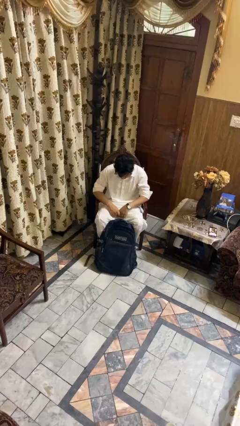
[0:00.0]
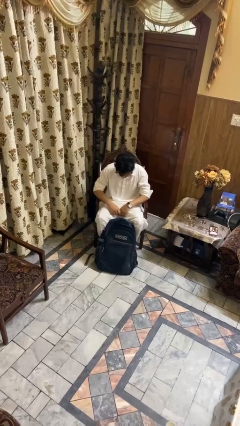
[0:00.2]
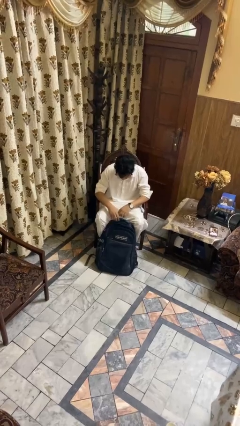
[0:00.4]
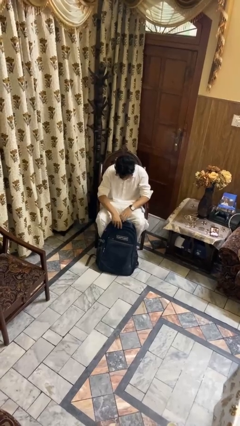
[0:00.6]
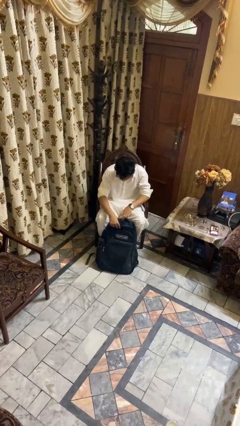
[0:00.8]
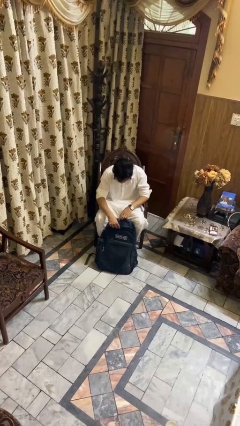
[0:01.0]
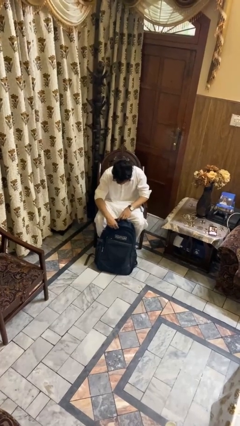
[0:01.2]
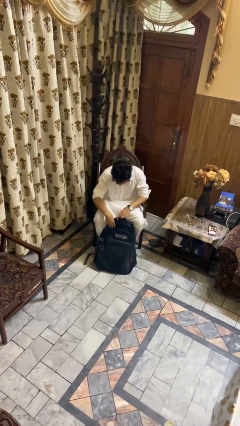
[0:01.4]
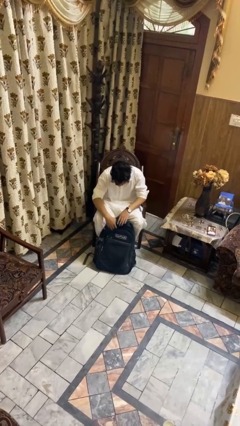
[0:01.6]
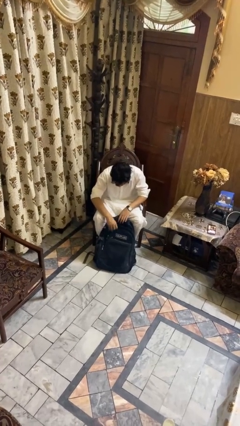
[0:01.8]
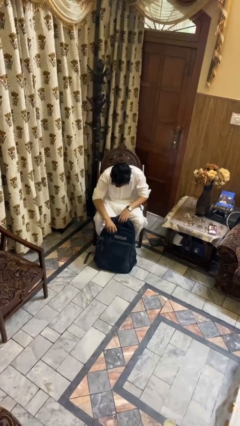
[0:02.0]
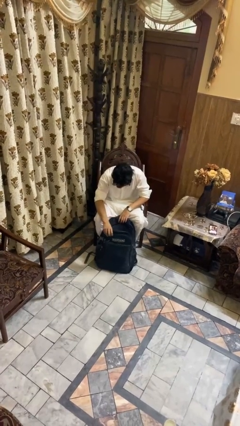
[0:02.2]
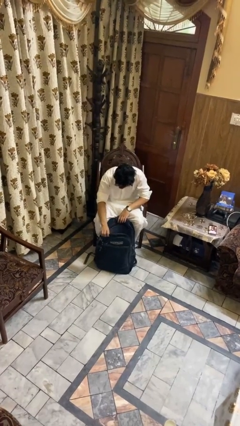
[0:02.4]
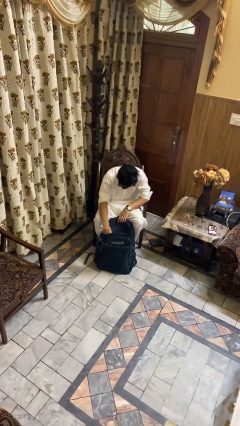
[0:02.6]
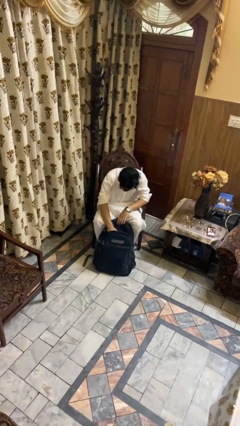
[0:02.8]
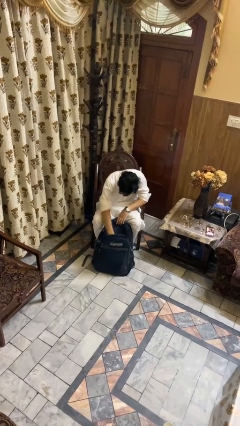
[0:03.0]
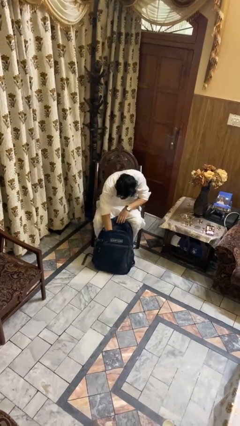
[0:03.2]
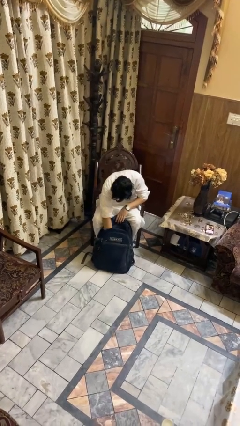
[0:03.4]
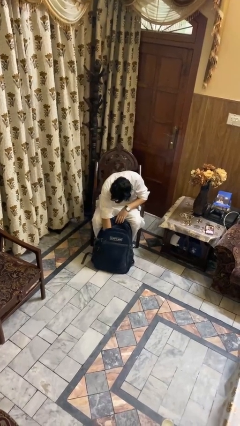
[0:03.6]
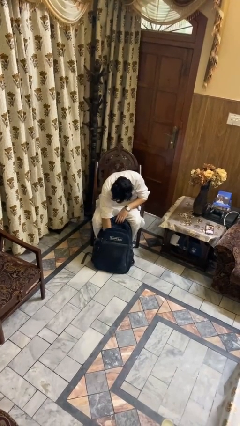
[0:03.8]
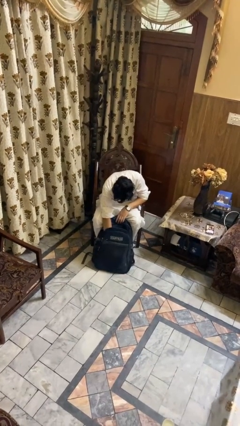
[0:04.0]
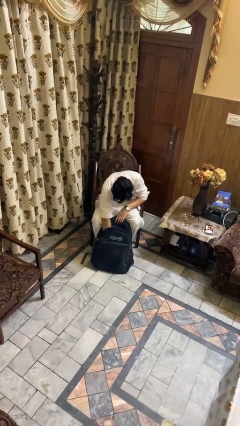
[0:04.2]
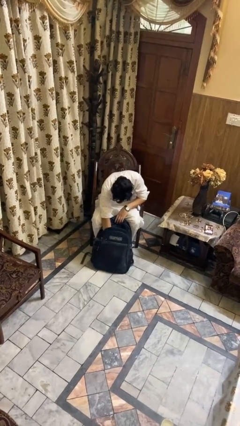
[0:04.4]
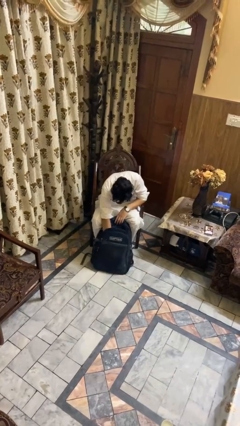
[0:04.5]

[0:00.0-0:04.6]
person searches in backpack

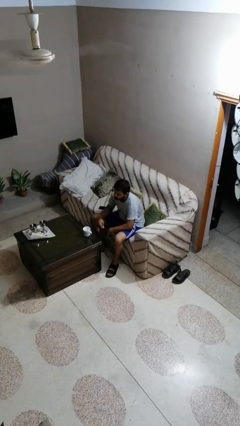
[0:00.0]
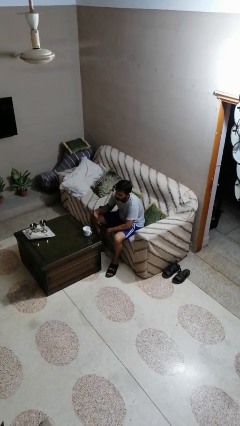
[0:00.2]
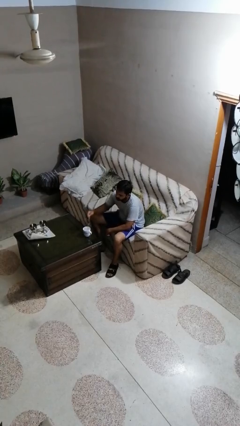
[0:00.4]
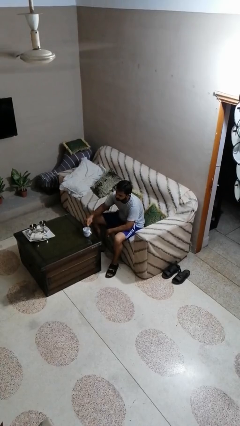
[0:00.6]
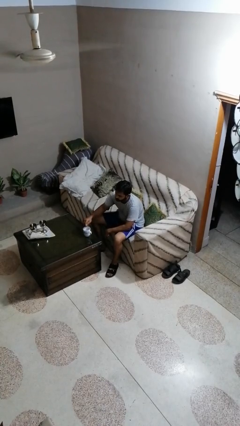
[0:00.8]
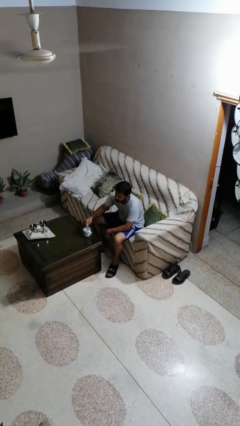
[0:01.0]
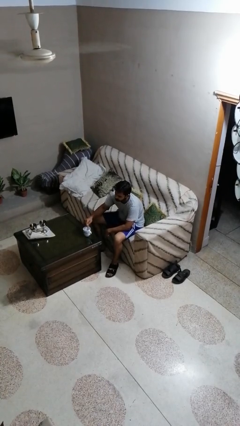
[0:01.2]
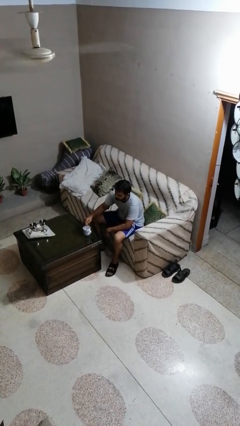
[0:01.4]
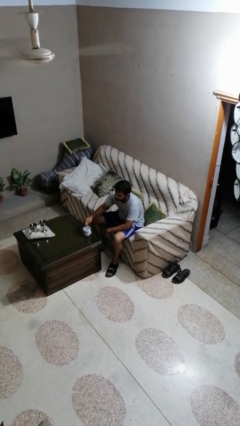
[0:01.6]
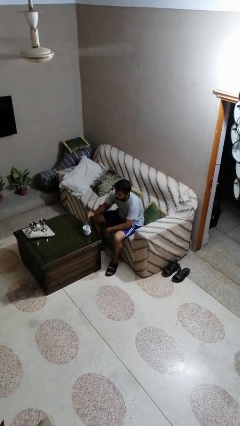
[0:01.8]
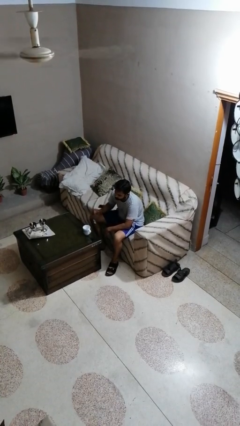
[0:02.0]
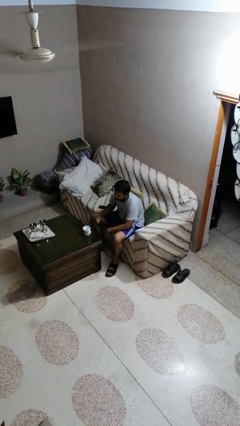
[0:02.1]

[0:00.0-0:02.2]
person stirs mug

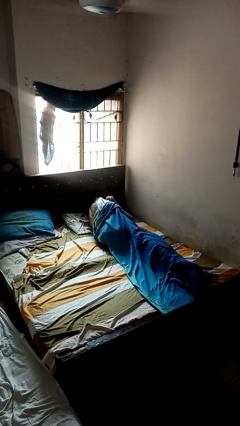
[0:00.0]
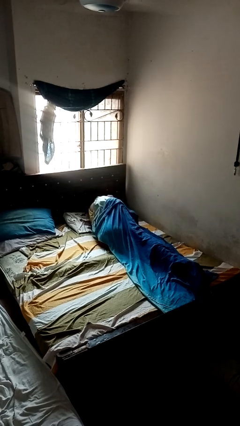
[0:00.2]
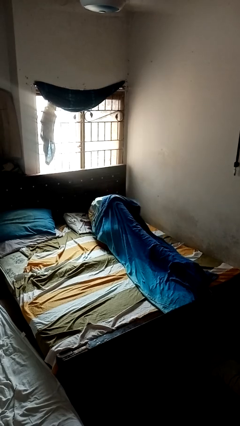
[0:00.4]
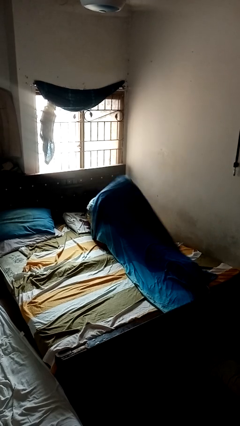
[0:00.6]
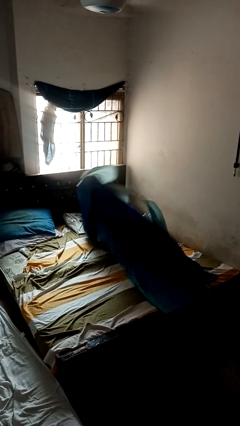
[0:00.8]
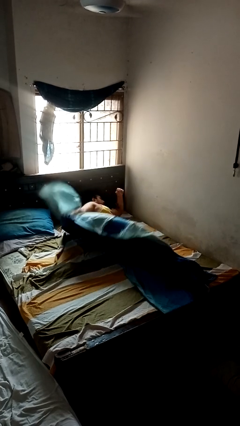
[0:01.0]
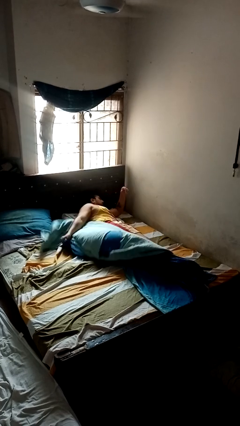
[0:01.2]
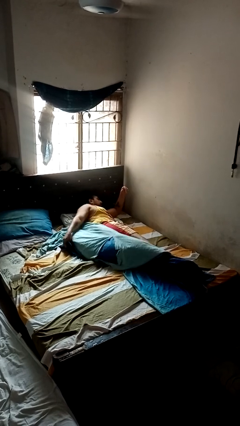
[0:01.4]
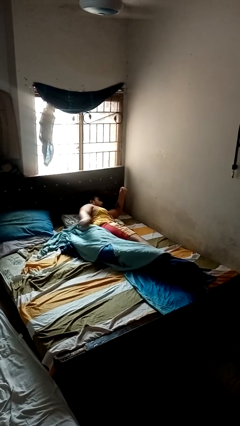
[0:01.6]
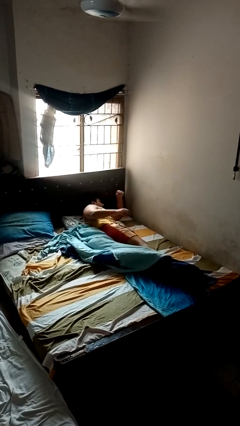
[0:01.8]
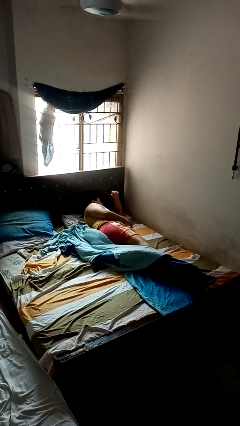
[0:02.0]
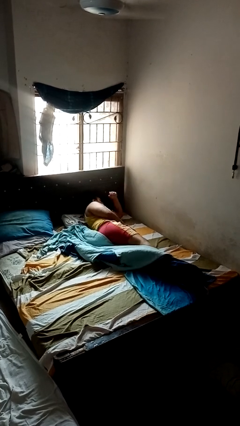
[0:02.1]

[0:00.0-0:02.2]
person uncovers with blanket

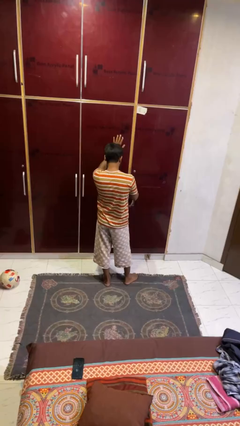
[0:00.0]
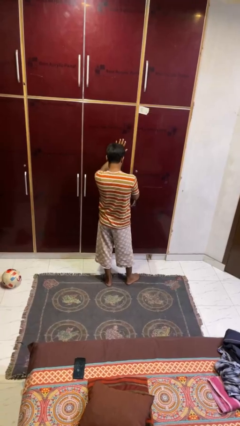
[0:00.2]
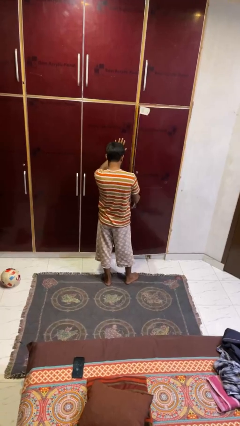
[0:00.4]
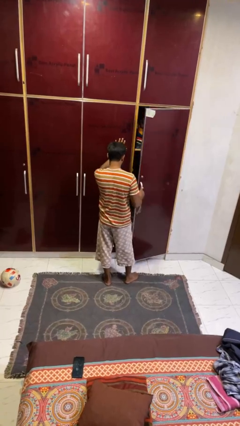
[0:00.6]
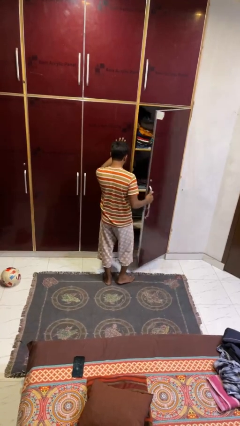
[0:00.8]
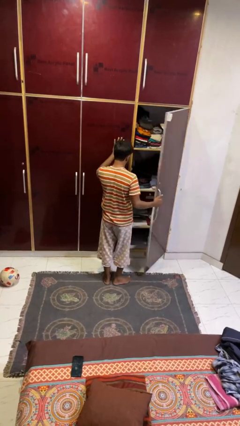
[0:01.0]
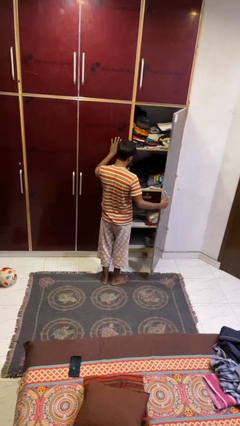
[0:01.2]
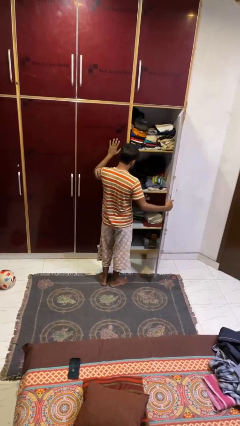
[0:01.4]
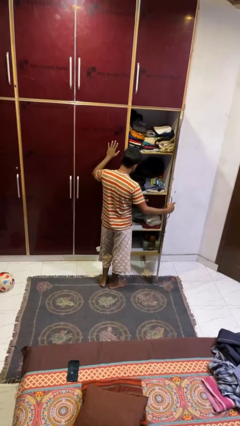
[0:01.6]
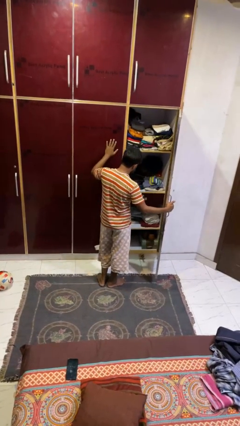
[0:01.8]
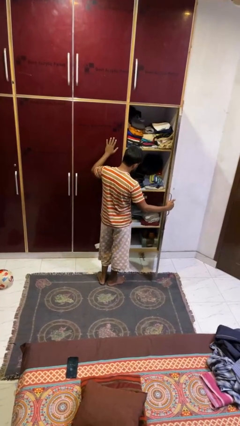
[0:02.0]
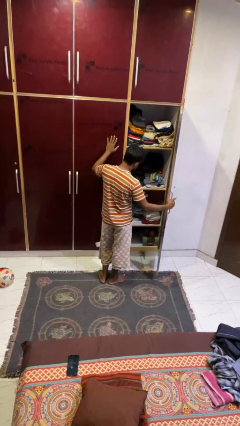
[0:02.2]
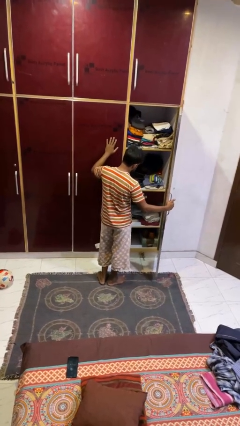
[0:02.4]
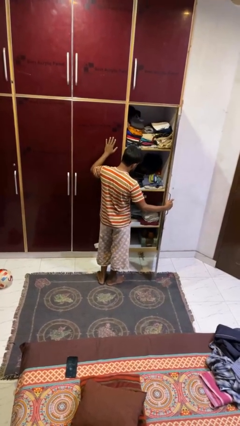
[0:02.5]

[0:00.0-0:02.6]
person opens closet door

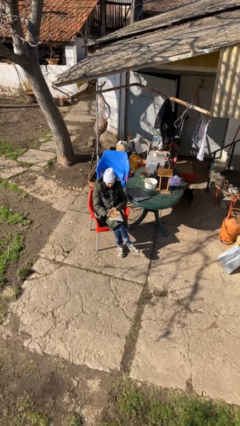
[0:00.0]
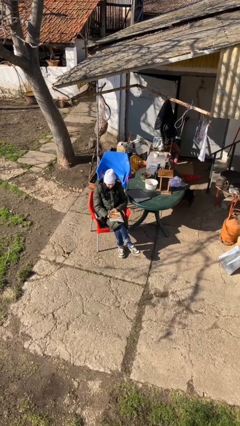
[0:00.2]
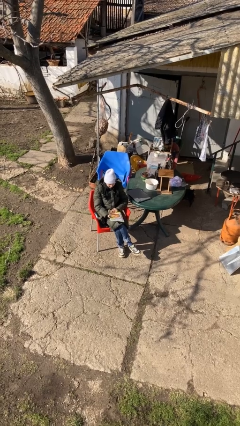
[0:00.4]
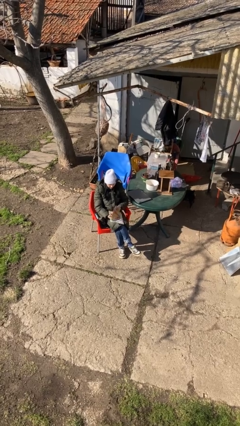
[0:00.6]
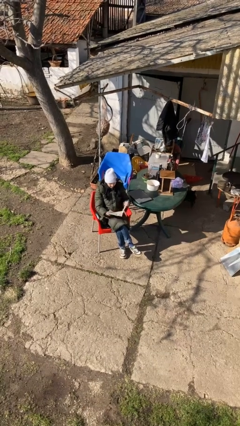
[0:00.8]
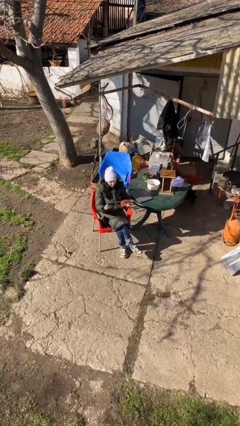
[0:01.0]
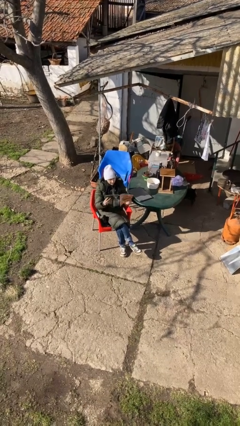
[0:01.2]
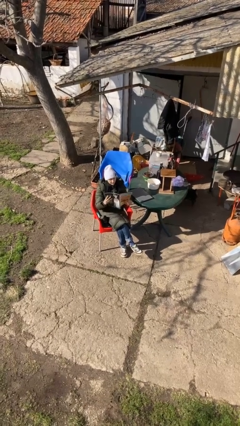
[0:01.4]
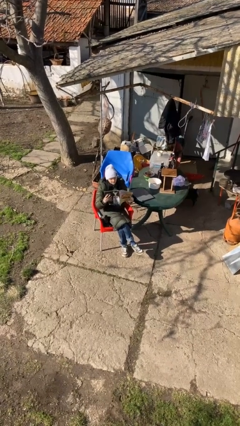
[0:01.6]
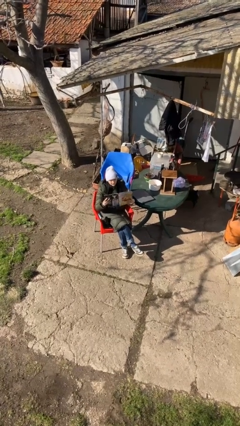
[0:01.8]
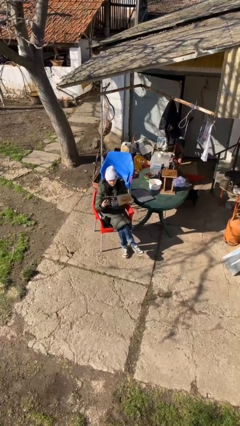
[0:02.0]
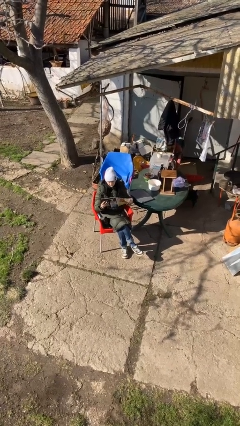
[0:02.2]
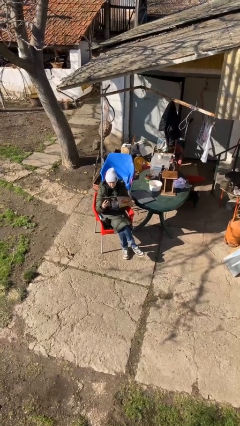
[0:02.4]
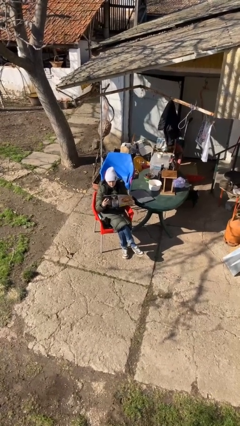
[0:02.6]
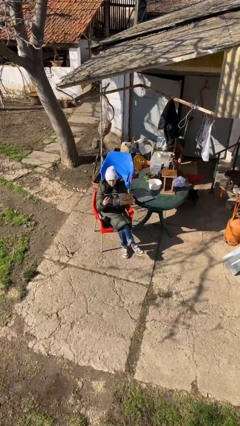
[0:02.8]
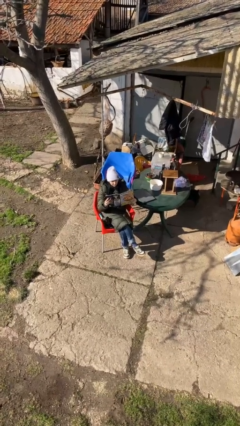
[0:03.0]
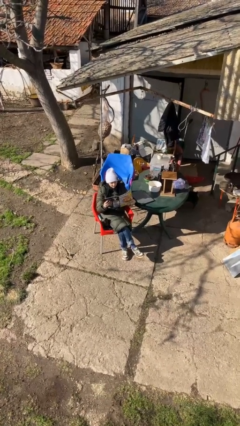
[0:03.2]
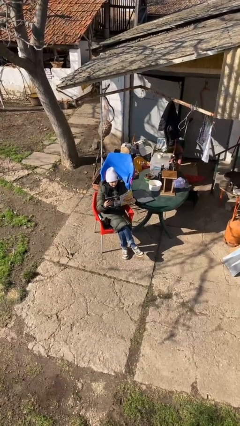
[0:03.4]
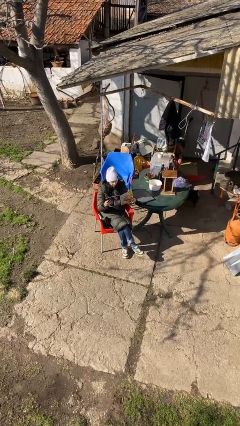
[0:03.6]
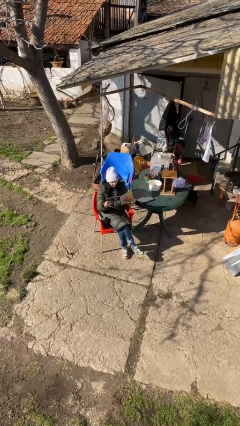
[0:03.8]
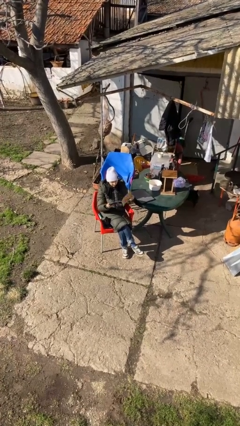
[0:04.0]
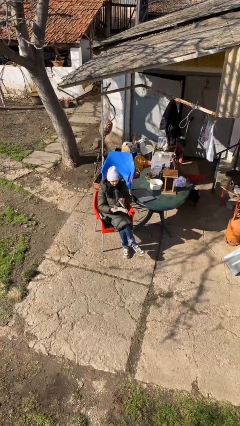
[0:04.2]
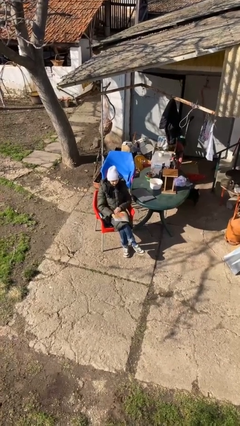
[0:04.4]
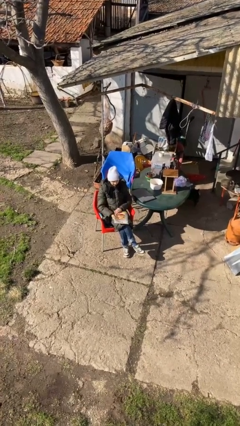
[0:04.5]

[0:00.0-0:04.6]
person reads document

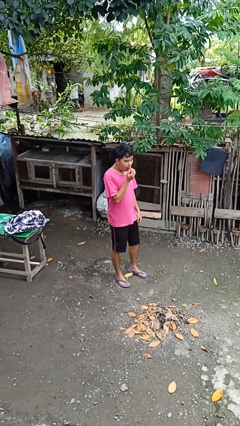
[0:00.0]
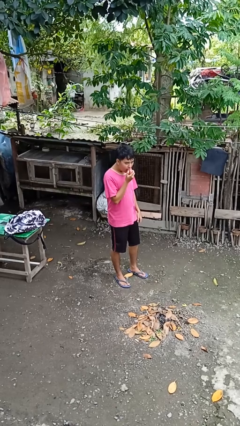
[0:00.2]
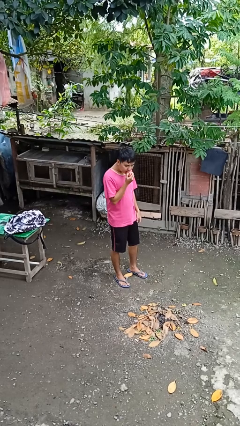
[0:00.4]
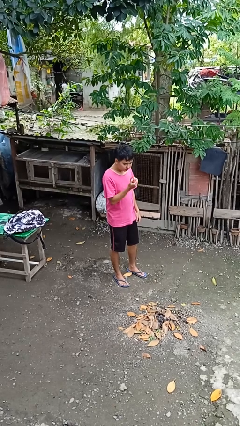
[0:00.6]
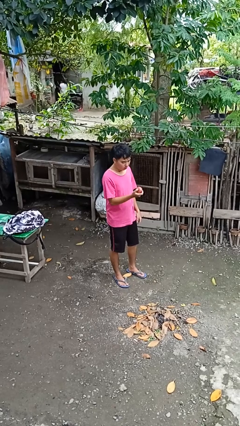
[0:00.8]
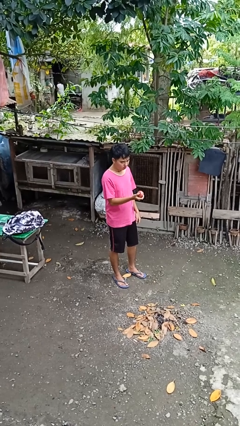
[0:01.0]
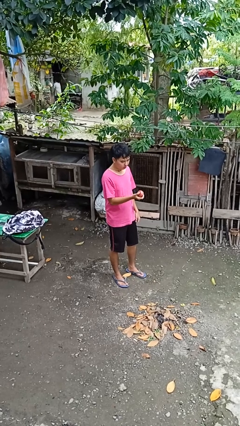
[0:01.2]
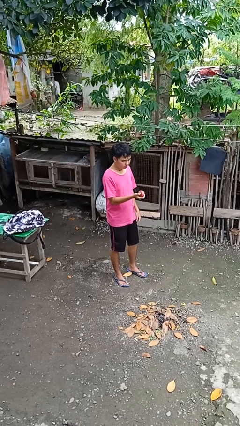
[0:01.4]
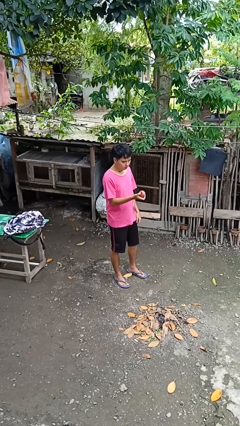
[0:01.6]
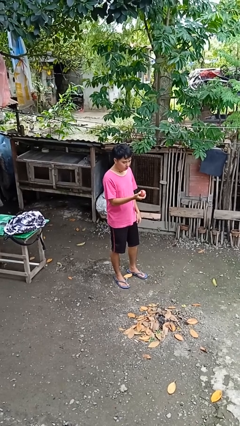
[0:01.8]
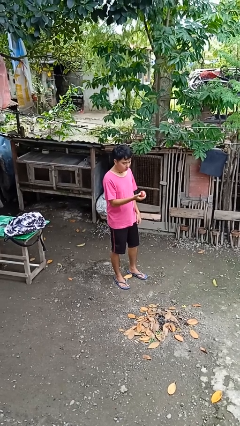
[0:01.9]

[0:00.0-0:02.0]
person eats apple
